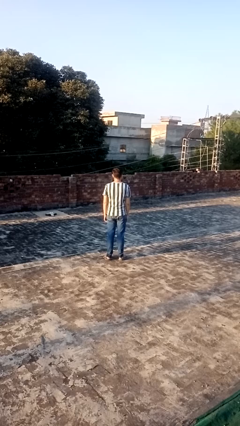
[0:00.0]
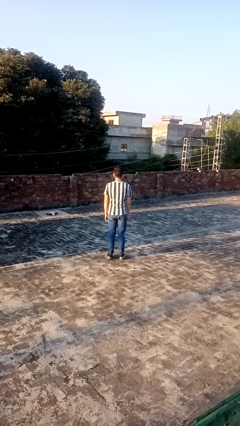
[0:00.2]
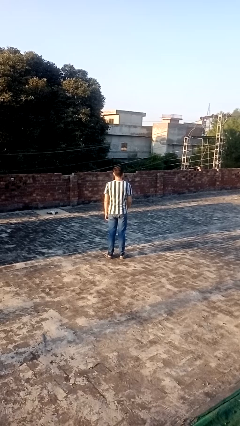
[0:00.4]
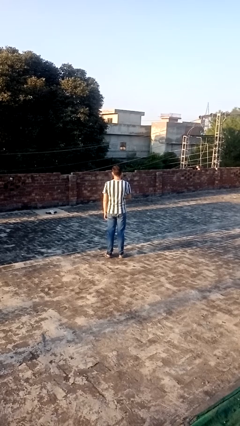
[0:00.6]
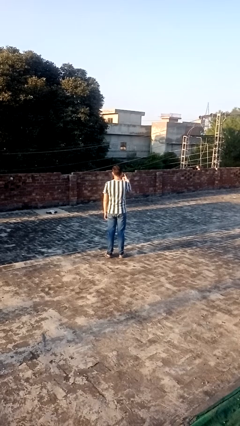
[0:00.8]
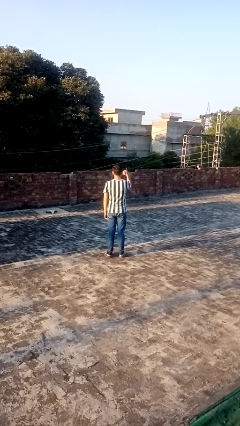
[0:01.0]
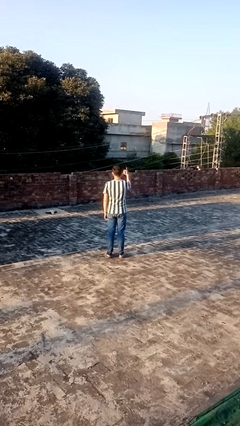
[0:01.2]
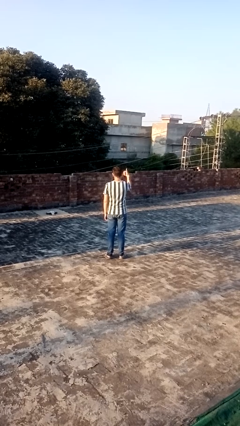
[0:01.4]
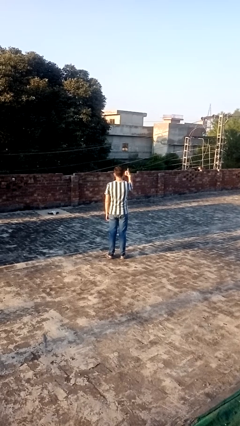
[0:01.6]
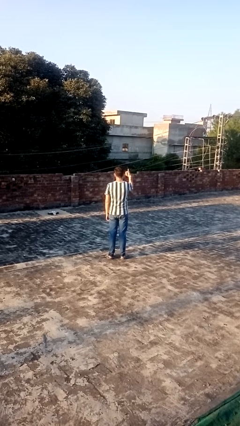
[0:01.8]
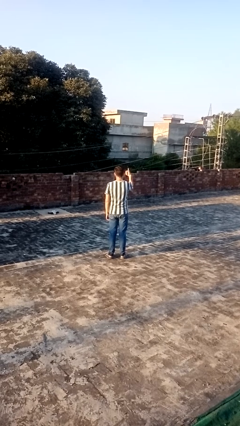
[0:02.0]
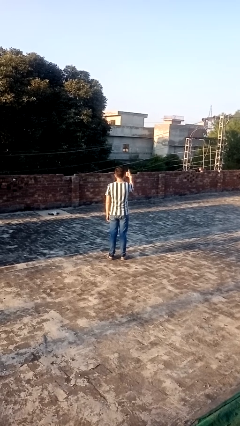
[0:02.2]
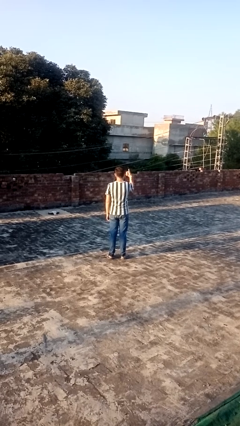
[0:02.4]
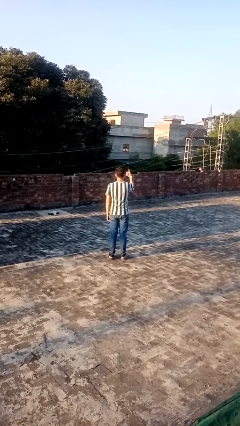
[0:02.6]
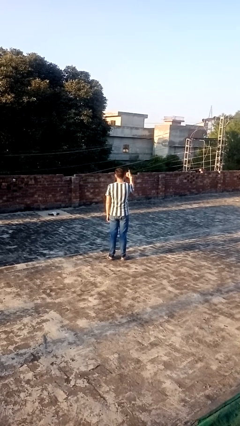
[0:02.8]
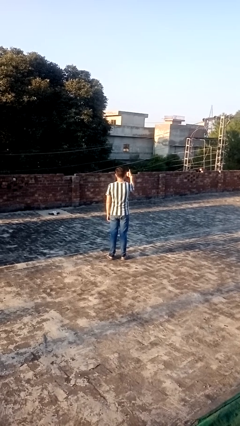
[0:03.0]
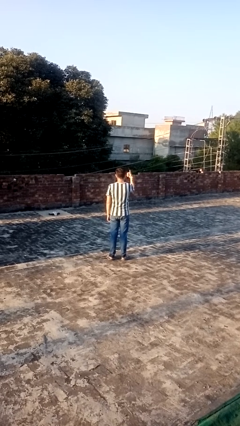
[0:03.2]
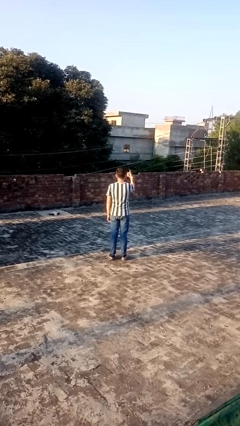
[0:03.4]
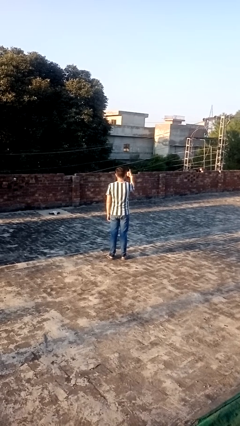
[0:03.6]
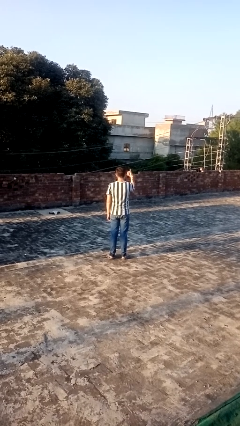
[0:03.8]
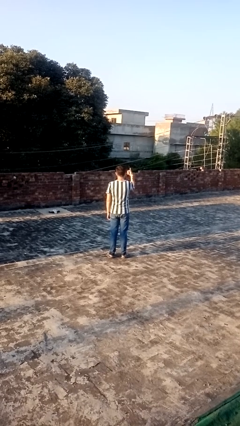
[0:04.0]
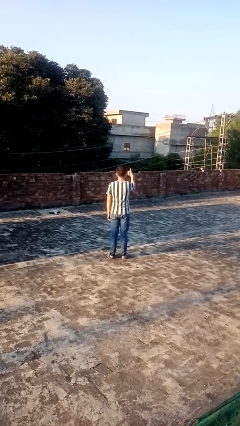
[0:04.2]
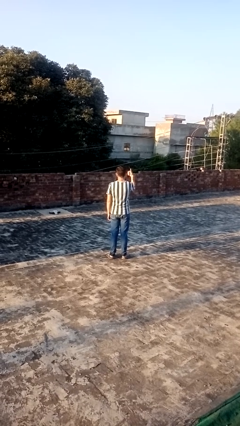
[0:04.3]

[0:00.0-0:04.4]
person gestures thumbs up

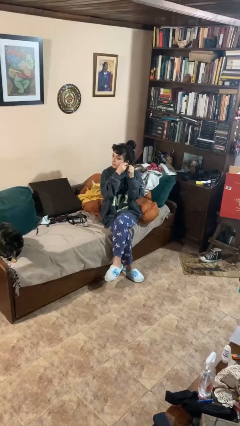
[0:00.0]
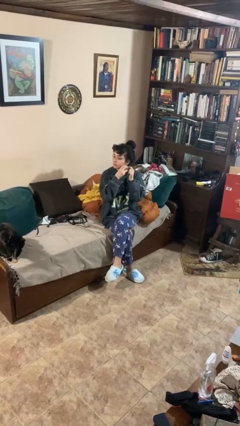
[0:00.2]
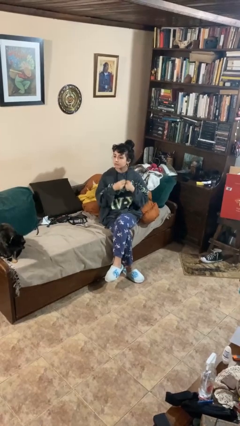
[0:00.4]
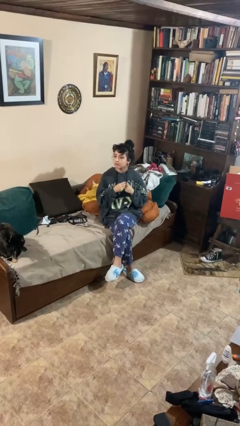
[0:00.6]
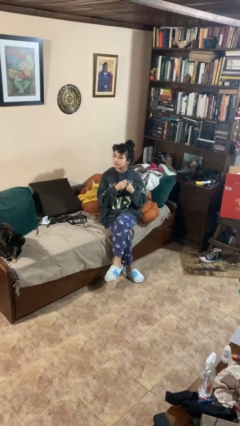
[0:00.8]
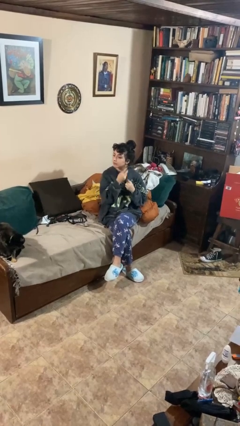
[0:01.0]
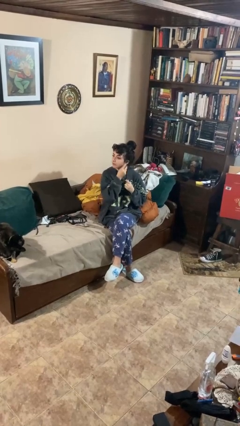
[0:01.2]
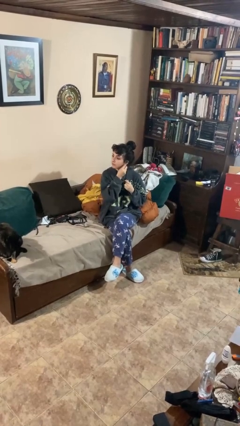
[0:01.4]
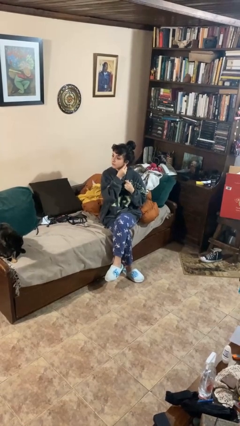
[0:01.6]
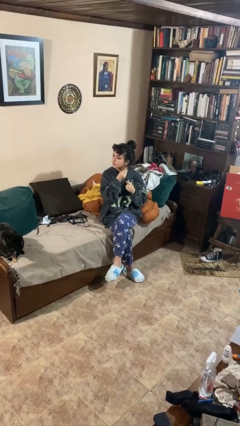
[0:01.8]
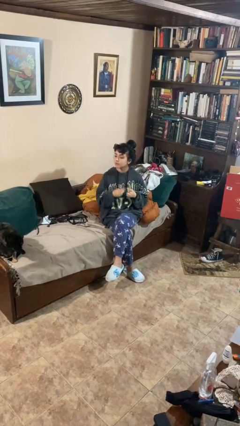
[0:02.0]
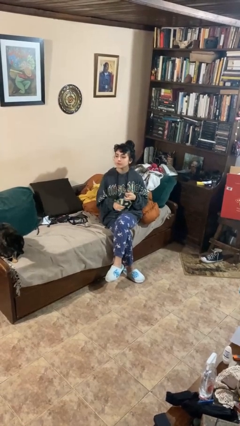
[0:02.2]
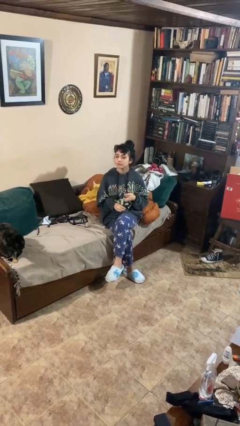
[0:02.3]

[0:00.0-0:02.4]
person takes off earrings

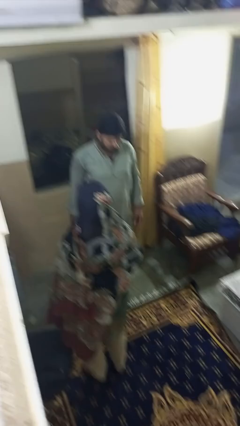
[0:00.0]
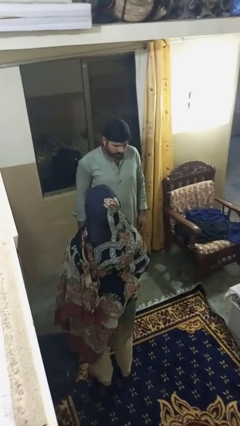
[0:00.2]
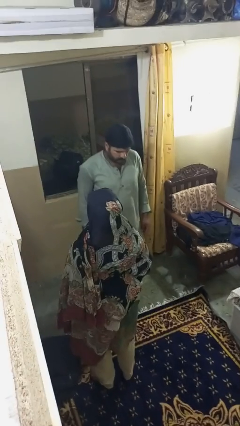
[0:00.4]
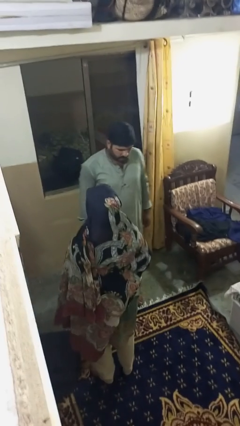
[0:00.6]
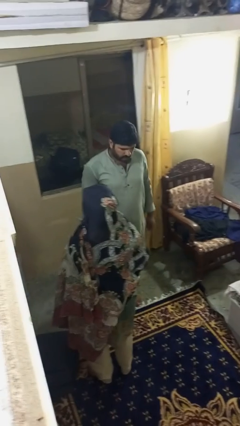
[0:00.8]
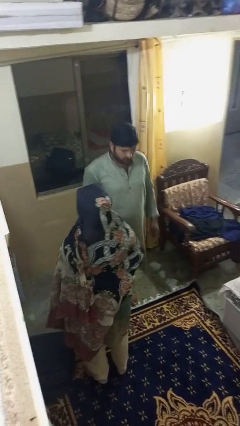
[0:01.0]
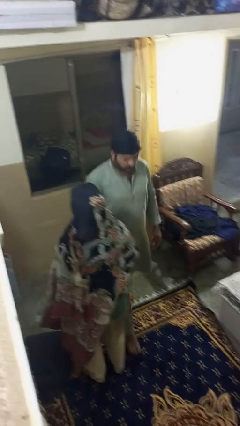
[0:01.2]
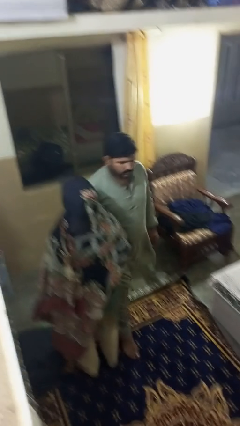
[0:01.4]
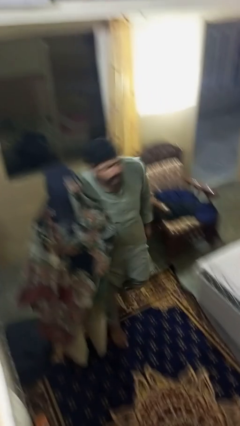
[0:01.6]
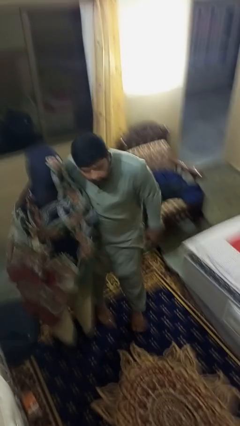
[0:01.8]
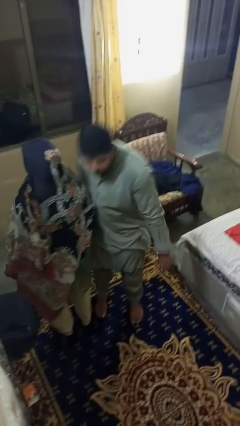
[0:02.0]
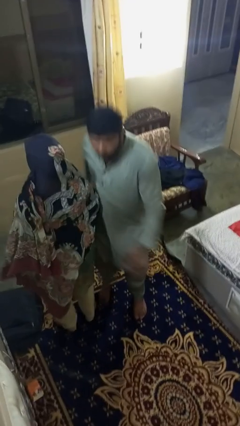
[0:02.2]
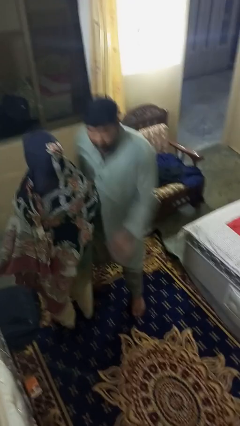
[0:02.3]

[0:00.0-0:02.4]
person bumps into person

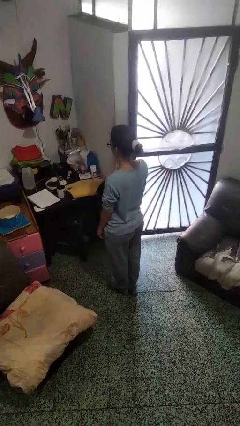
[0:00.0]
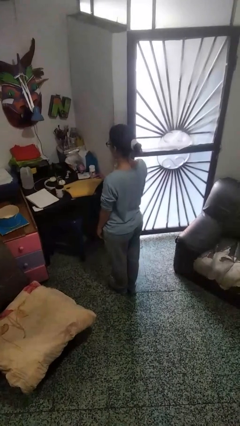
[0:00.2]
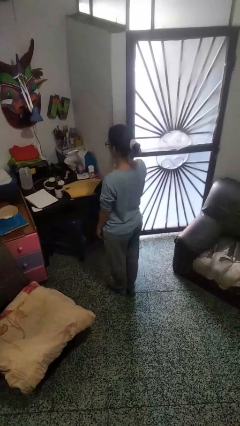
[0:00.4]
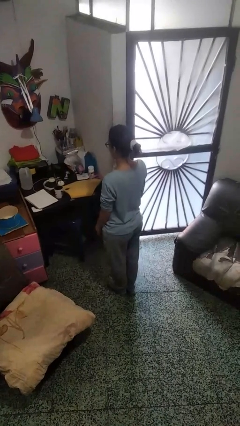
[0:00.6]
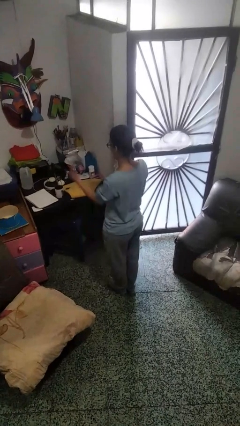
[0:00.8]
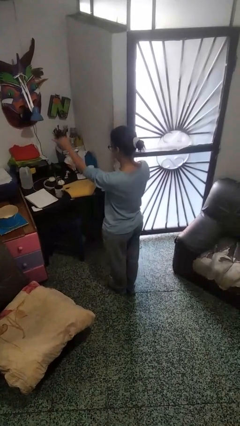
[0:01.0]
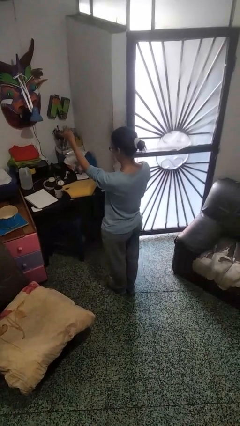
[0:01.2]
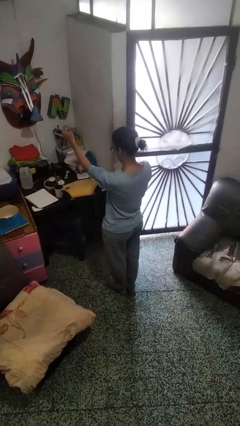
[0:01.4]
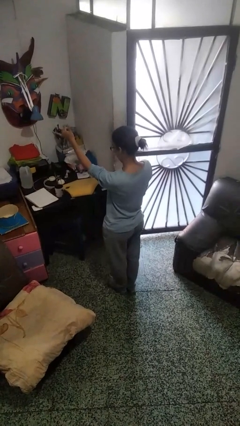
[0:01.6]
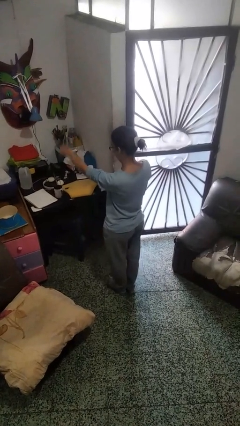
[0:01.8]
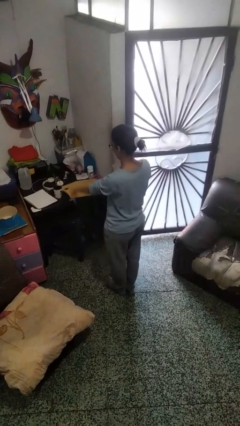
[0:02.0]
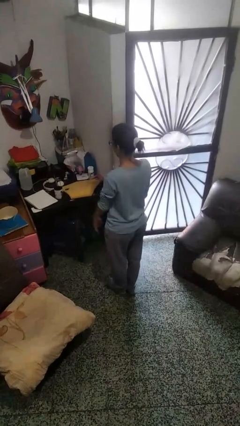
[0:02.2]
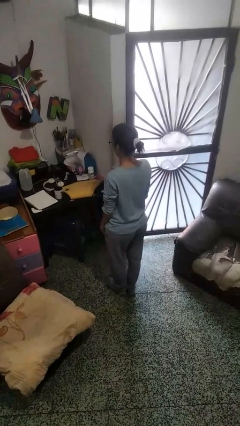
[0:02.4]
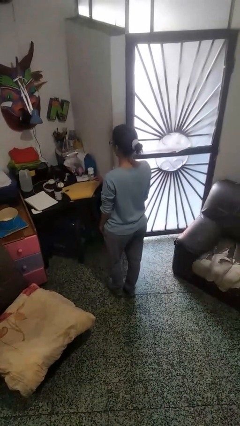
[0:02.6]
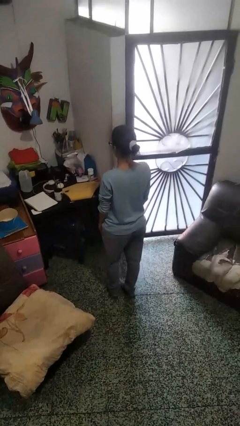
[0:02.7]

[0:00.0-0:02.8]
person gestures hang loose

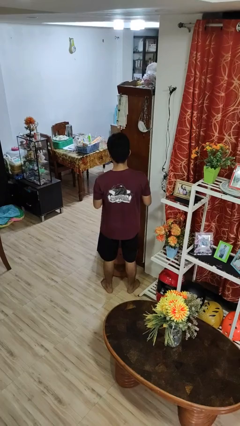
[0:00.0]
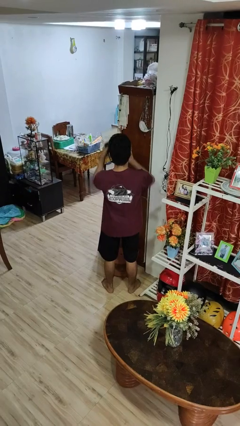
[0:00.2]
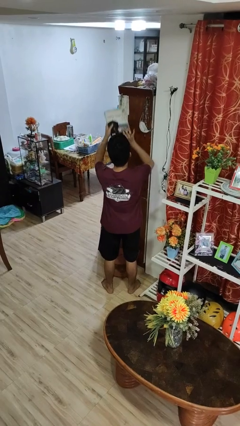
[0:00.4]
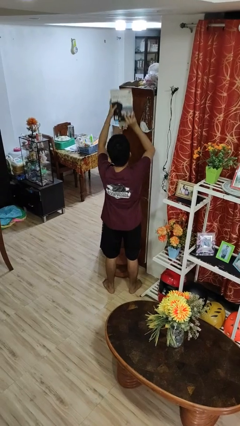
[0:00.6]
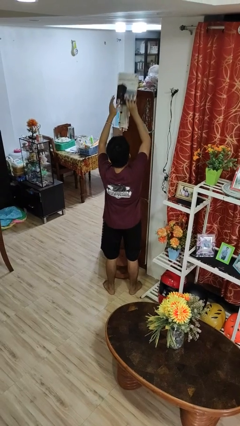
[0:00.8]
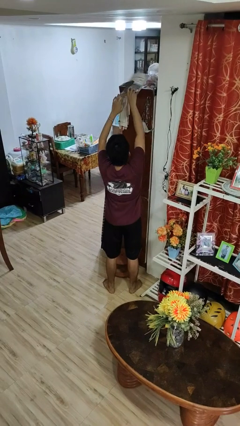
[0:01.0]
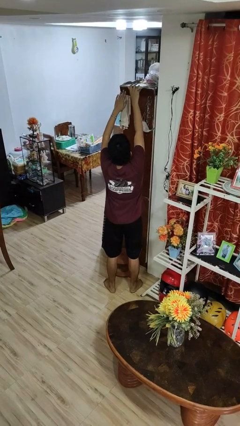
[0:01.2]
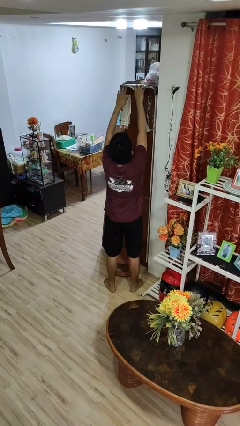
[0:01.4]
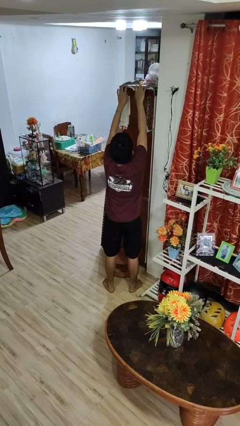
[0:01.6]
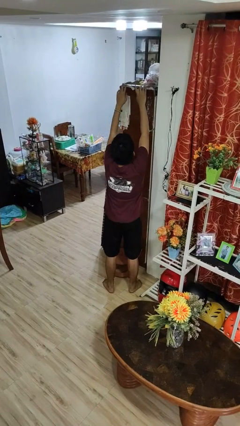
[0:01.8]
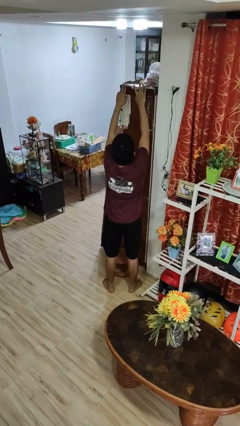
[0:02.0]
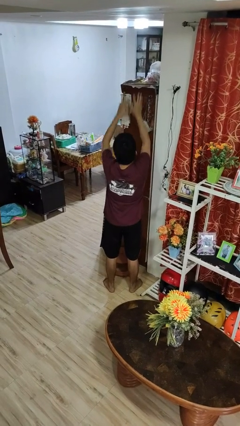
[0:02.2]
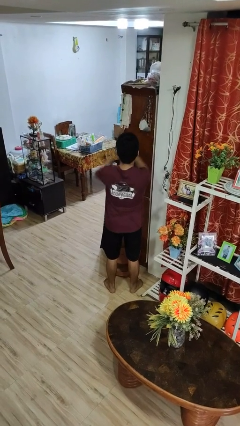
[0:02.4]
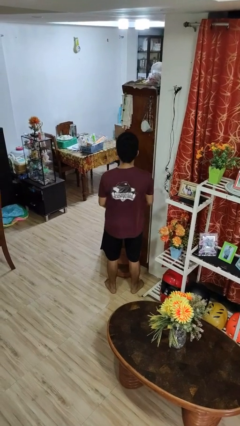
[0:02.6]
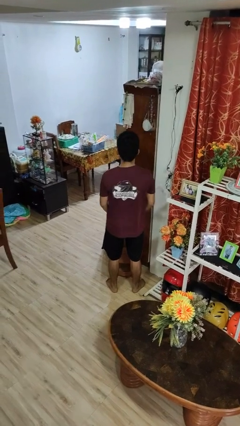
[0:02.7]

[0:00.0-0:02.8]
person puts down object on shelf

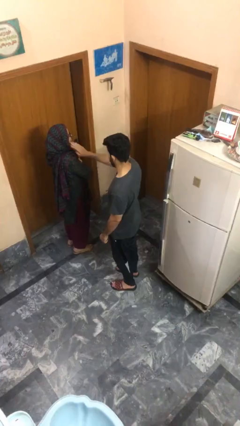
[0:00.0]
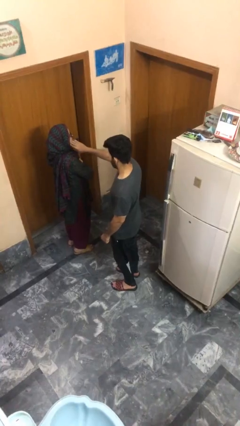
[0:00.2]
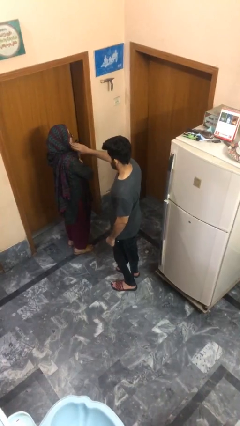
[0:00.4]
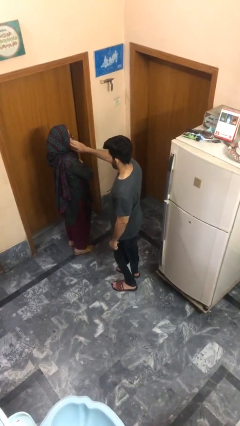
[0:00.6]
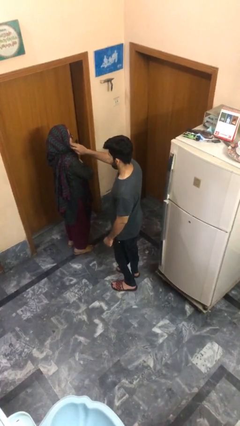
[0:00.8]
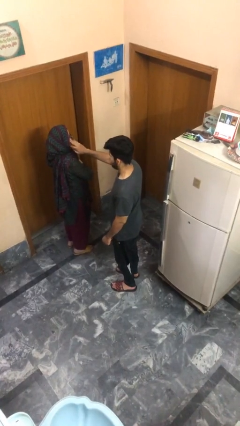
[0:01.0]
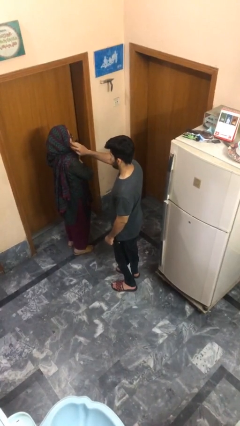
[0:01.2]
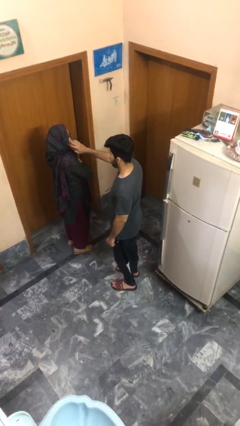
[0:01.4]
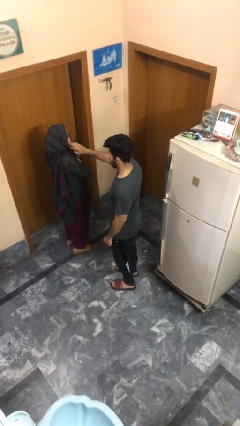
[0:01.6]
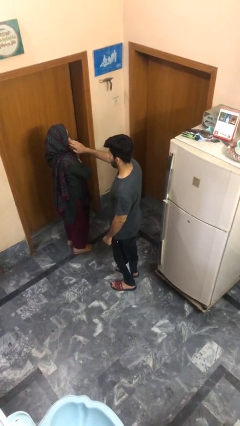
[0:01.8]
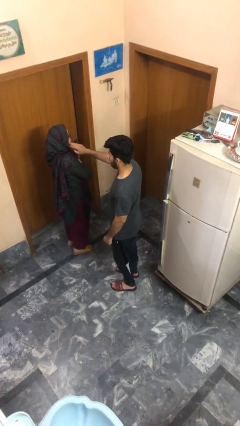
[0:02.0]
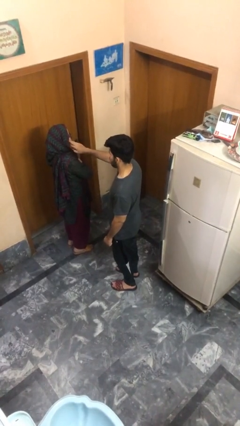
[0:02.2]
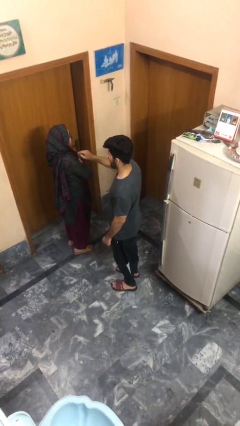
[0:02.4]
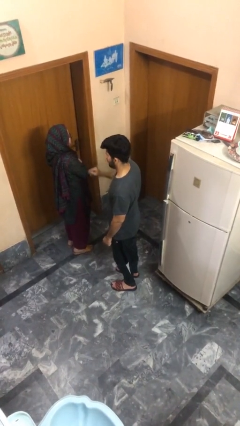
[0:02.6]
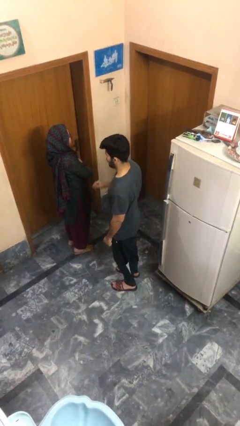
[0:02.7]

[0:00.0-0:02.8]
person touches face of person
